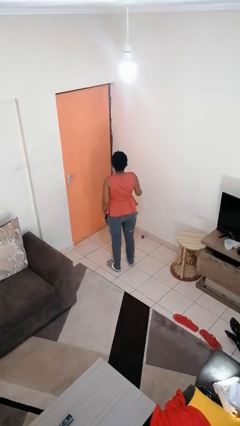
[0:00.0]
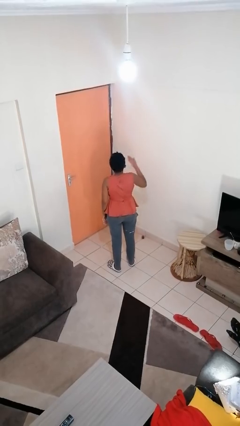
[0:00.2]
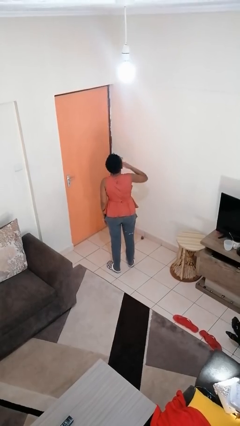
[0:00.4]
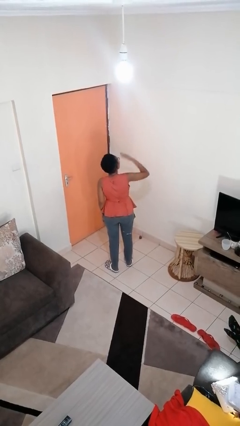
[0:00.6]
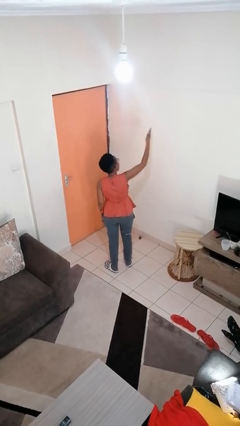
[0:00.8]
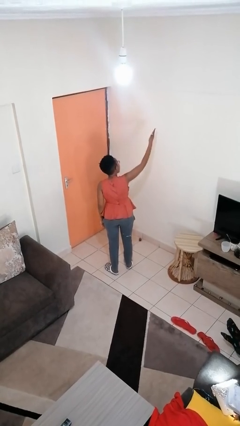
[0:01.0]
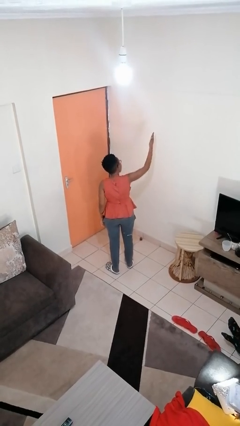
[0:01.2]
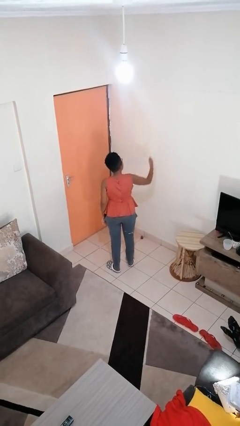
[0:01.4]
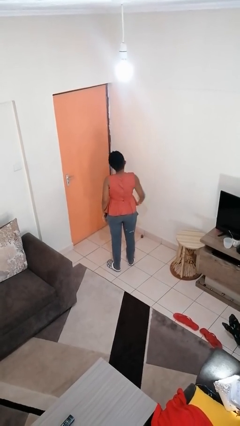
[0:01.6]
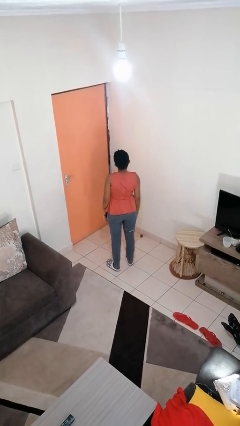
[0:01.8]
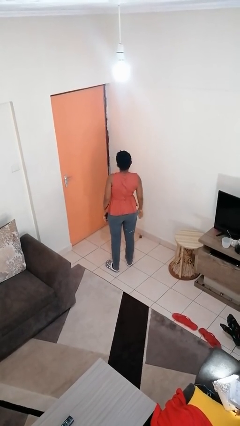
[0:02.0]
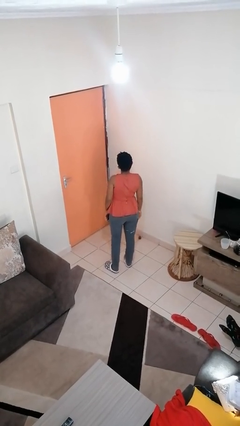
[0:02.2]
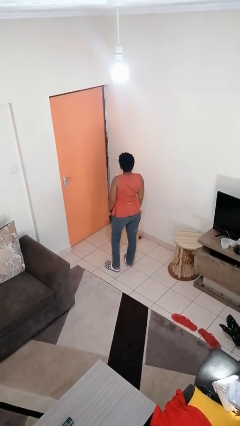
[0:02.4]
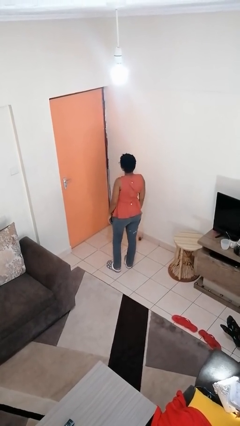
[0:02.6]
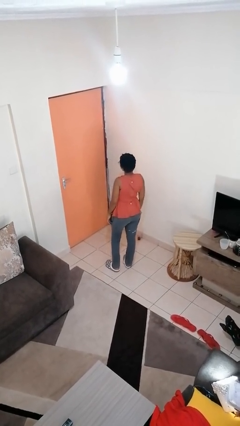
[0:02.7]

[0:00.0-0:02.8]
person gestures blow kiss

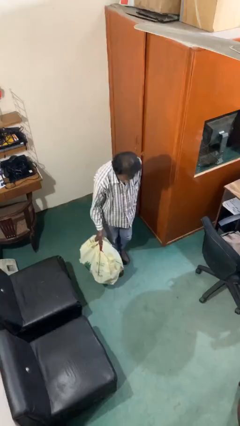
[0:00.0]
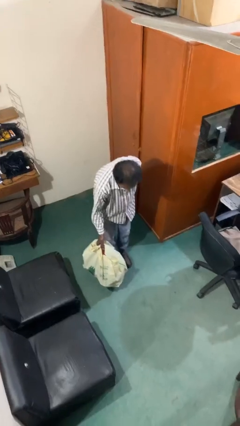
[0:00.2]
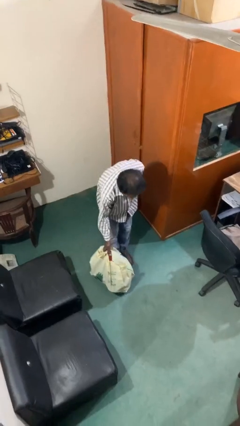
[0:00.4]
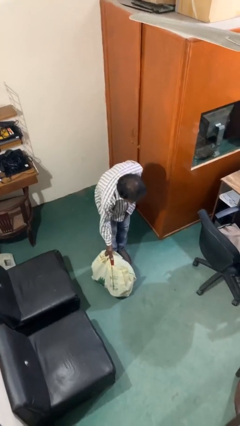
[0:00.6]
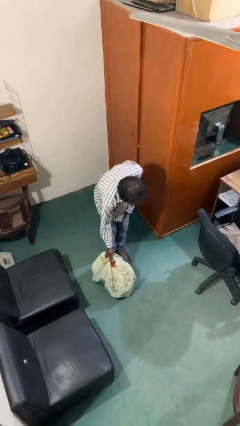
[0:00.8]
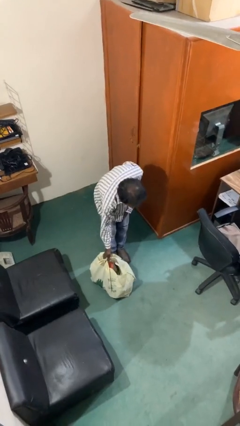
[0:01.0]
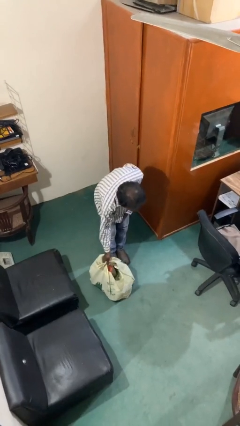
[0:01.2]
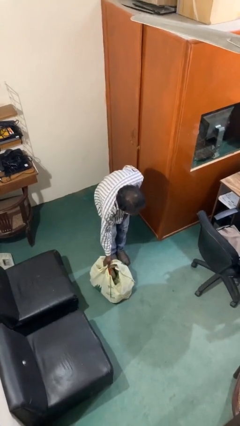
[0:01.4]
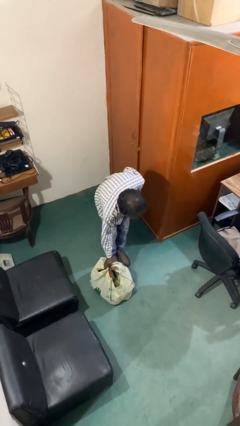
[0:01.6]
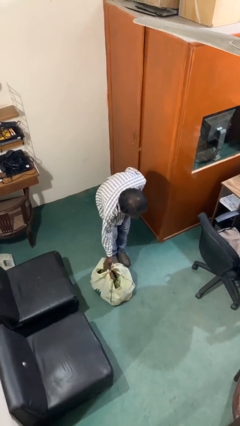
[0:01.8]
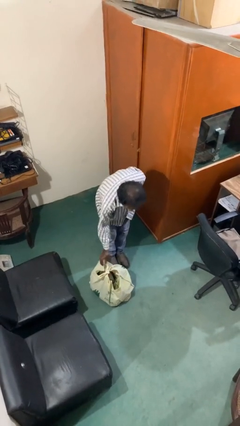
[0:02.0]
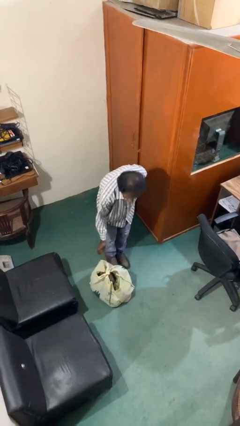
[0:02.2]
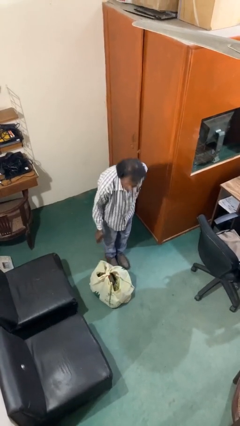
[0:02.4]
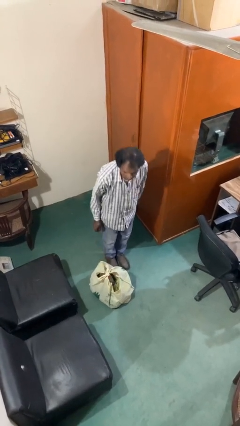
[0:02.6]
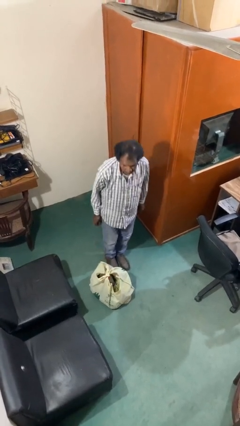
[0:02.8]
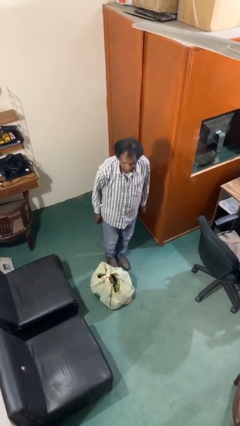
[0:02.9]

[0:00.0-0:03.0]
person puts down object on floor

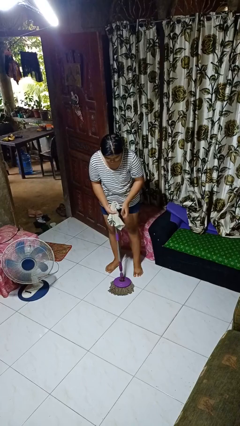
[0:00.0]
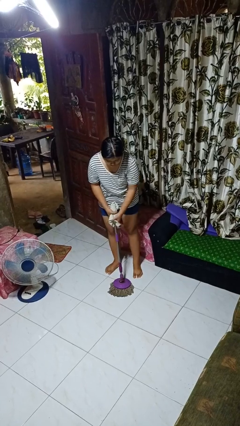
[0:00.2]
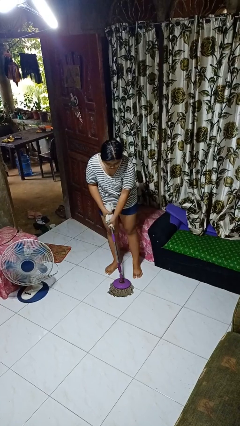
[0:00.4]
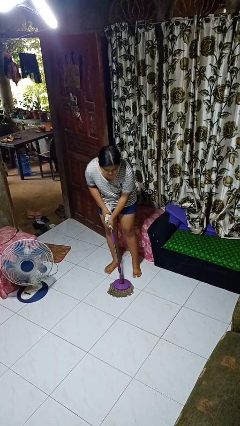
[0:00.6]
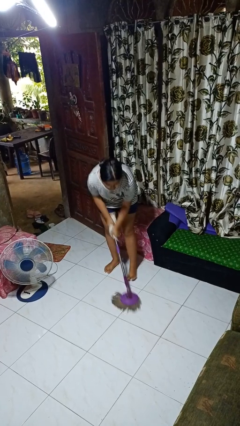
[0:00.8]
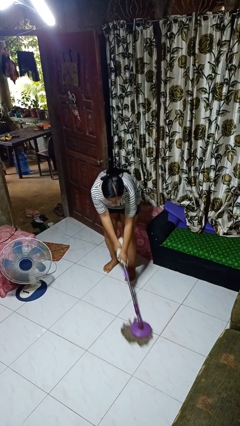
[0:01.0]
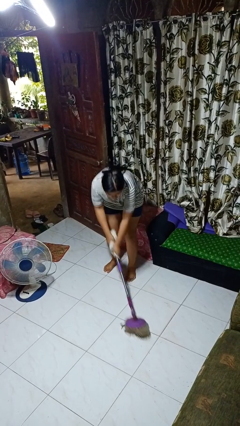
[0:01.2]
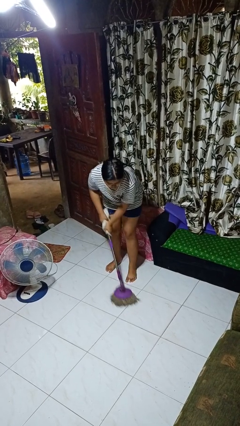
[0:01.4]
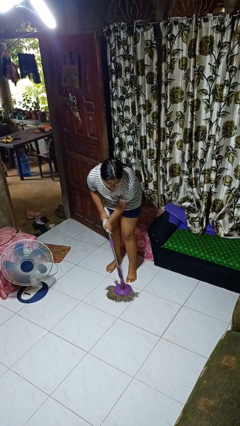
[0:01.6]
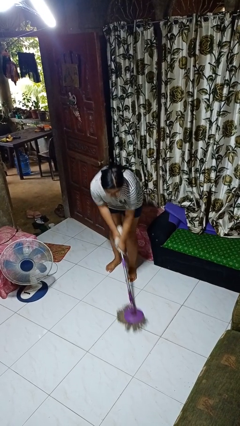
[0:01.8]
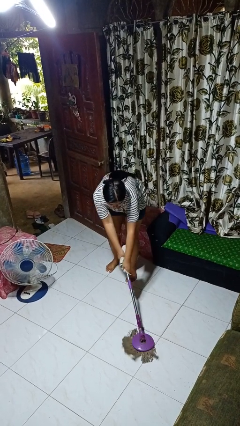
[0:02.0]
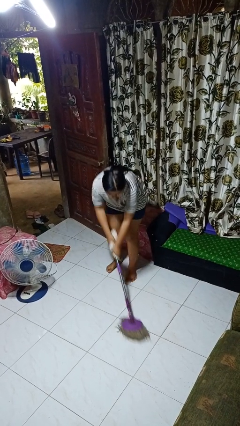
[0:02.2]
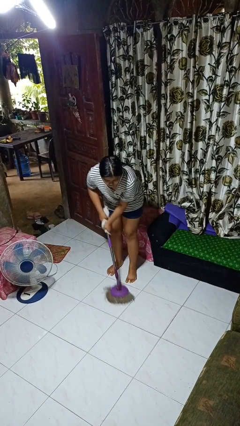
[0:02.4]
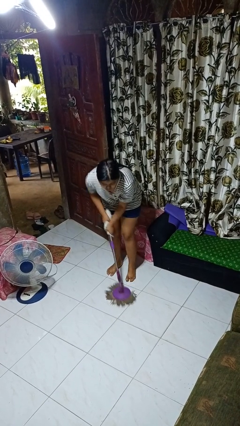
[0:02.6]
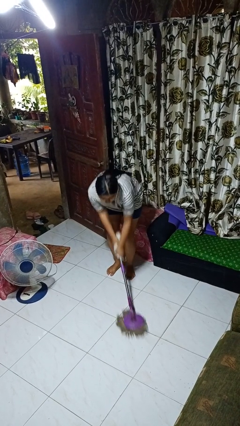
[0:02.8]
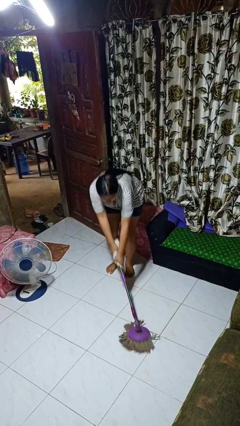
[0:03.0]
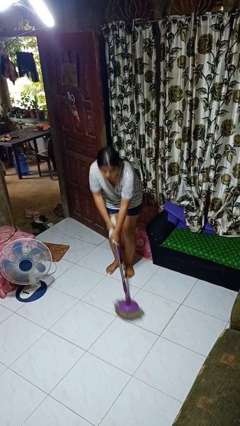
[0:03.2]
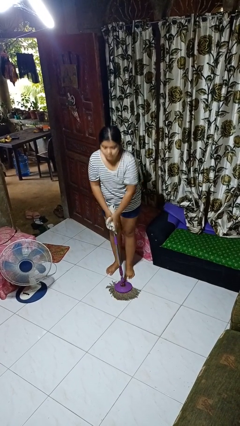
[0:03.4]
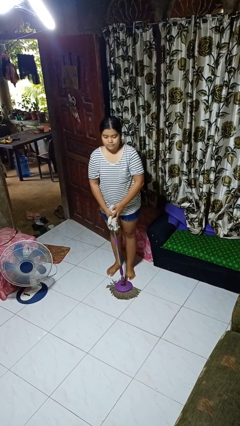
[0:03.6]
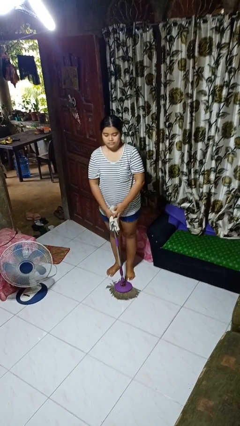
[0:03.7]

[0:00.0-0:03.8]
person mops

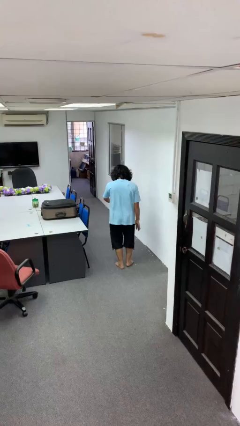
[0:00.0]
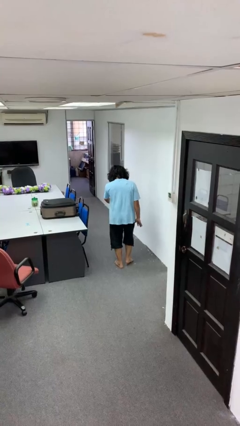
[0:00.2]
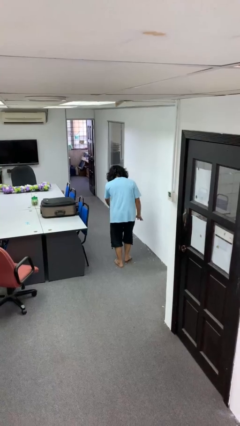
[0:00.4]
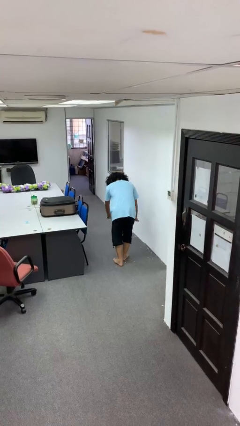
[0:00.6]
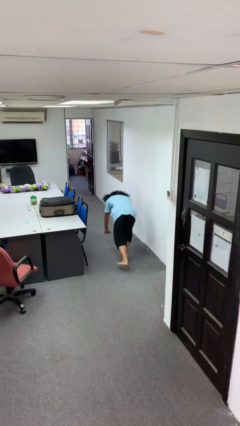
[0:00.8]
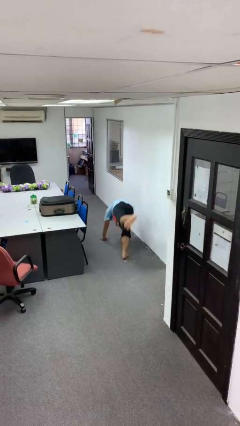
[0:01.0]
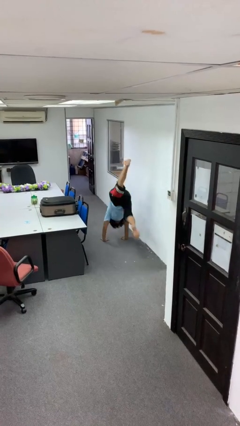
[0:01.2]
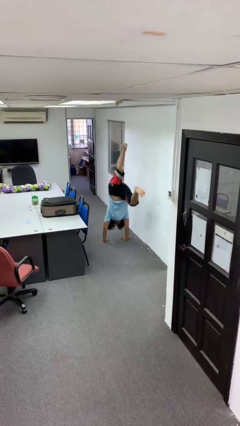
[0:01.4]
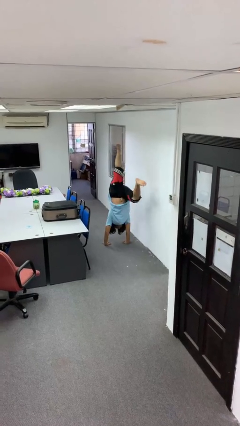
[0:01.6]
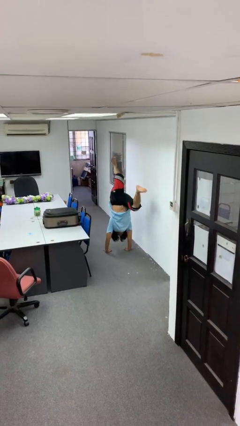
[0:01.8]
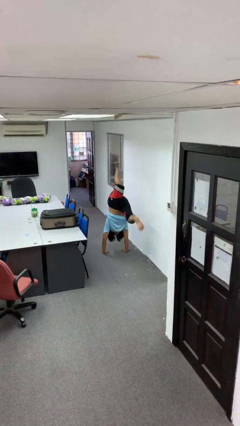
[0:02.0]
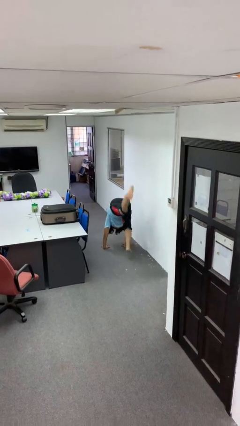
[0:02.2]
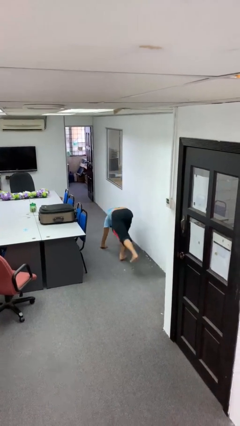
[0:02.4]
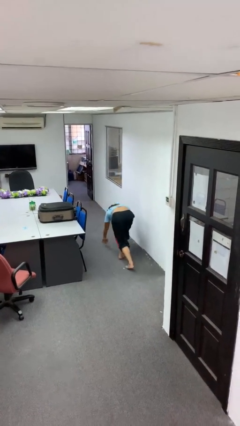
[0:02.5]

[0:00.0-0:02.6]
person handstand

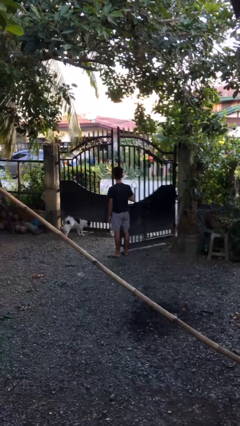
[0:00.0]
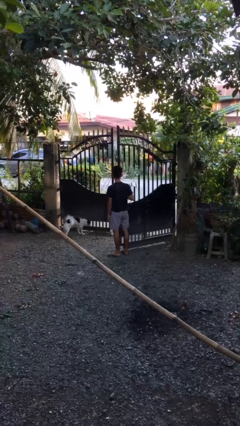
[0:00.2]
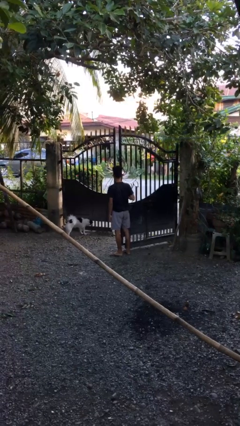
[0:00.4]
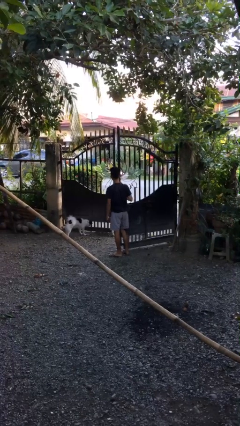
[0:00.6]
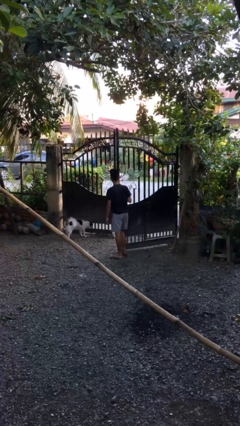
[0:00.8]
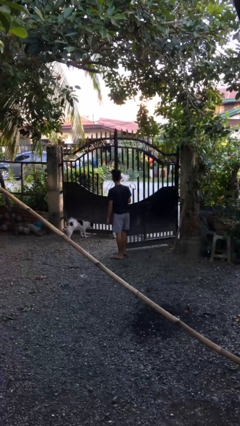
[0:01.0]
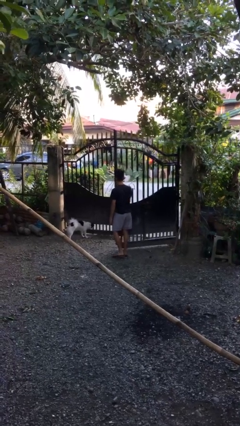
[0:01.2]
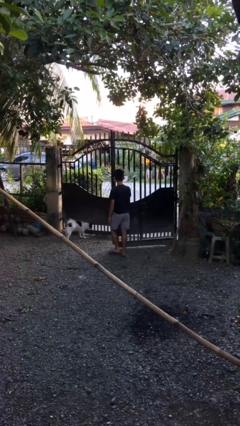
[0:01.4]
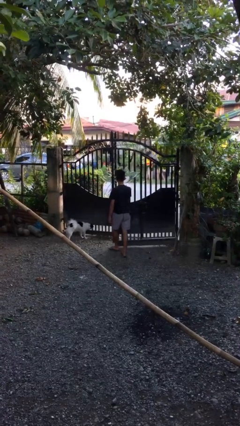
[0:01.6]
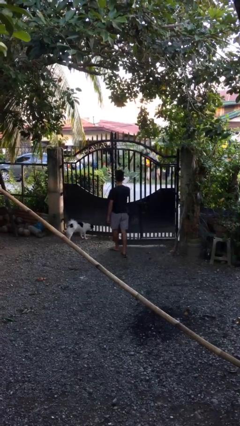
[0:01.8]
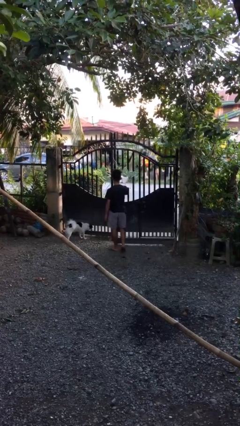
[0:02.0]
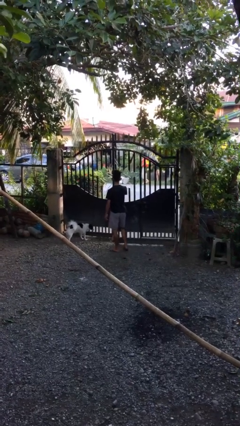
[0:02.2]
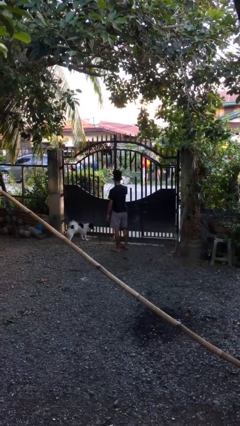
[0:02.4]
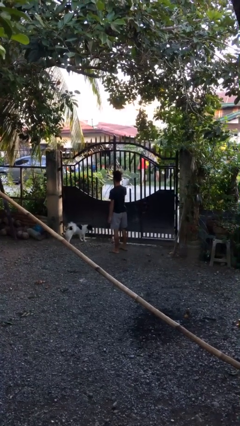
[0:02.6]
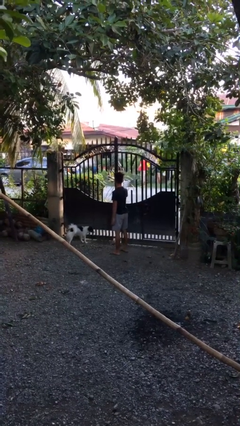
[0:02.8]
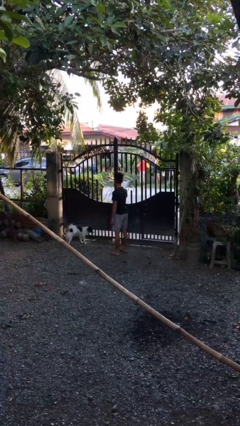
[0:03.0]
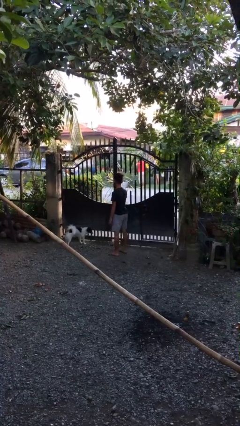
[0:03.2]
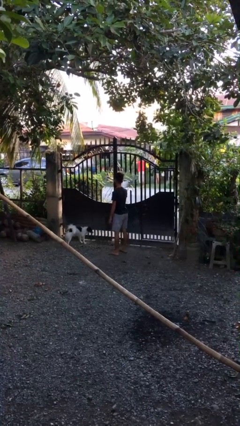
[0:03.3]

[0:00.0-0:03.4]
person closes gate

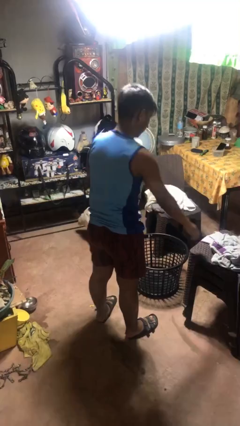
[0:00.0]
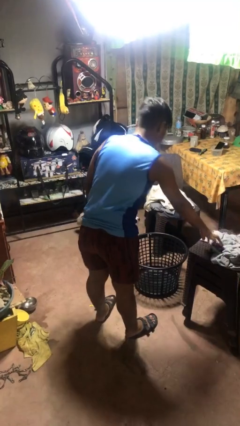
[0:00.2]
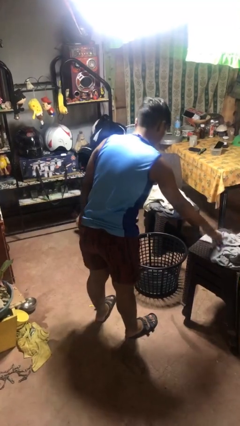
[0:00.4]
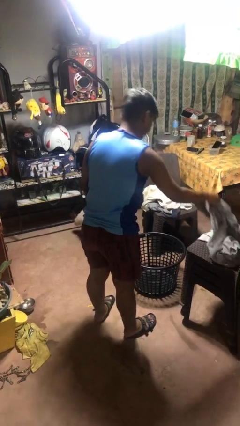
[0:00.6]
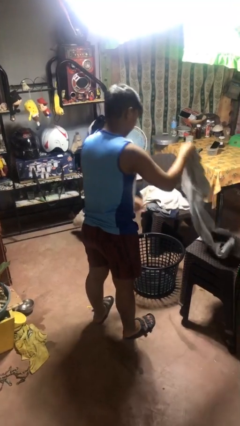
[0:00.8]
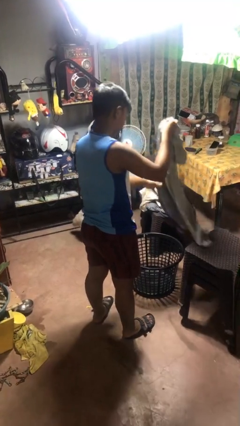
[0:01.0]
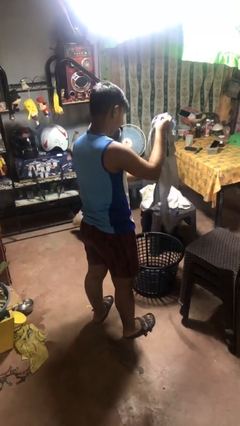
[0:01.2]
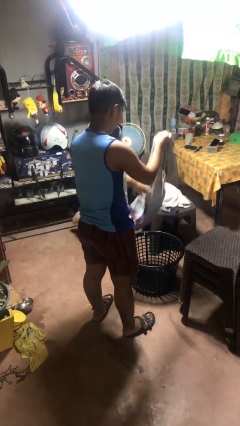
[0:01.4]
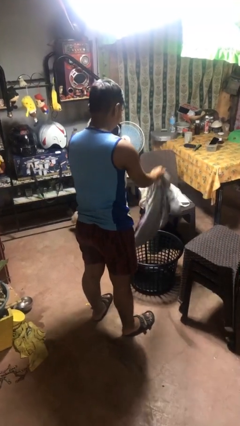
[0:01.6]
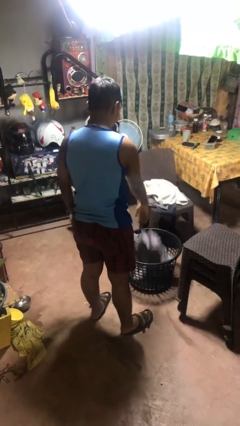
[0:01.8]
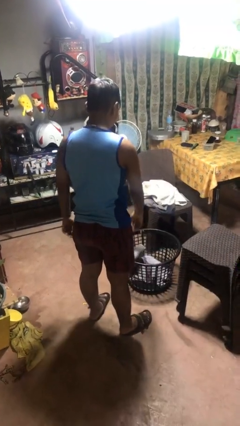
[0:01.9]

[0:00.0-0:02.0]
person puts object into basket
